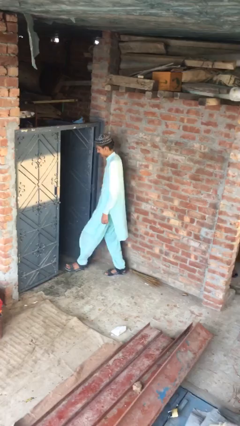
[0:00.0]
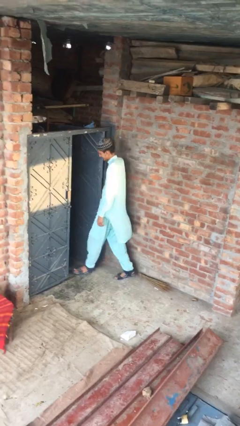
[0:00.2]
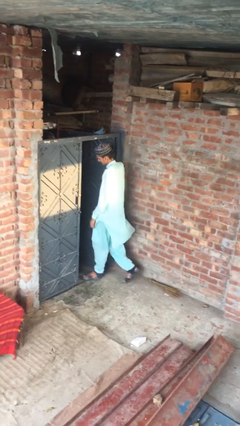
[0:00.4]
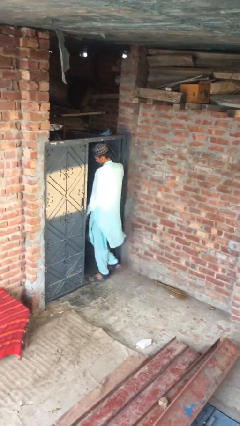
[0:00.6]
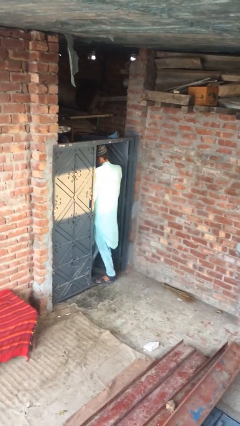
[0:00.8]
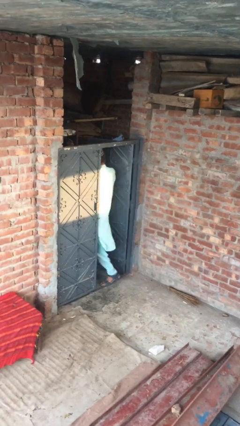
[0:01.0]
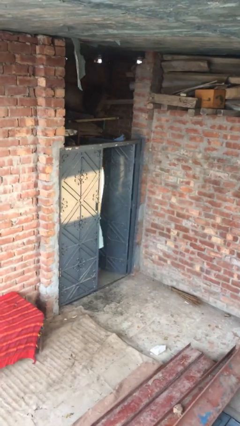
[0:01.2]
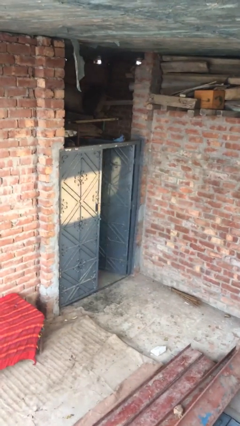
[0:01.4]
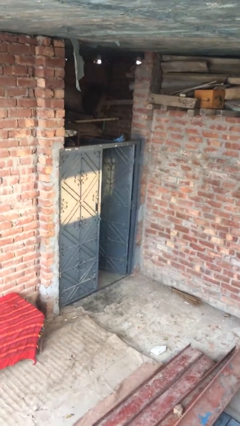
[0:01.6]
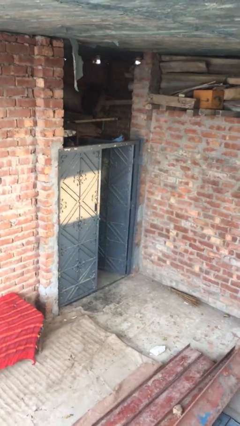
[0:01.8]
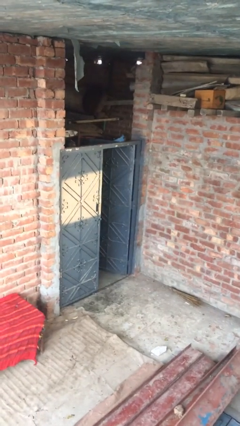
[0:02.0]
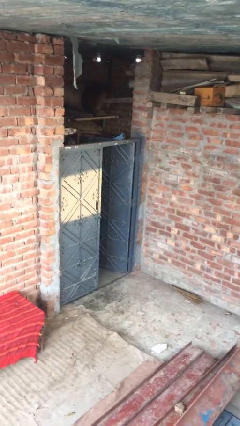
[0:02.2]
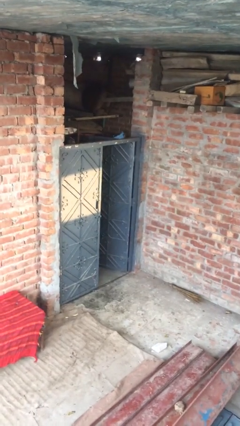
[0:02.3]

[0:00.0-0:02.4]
person exits scene through structure

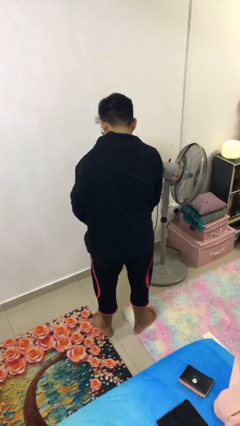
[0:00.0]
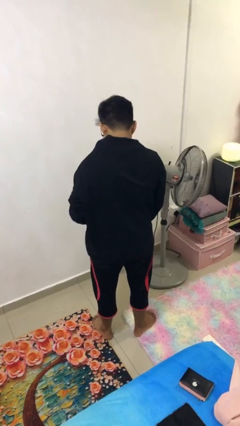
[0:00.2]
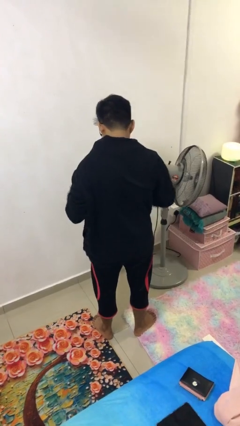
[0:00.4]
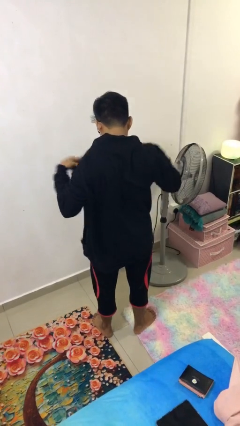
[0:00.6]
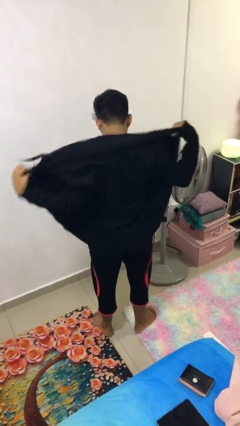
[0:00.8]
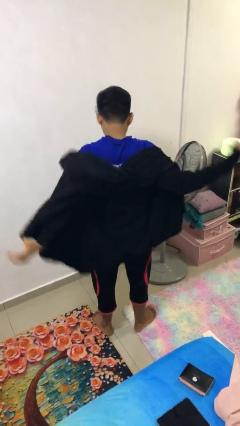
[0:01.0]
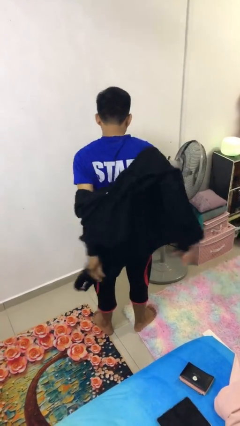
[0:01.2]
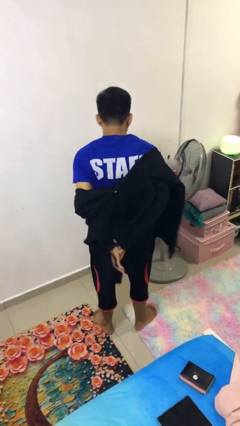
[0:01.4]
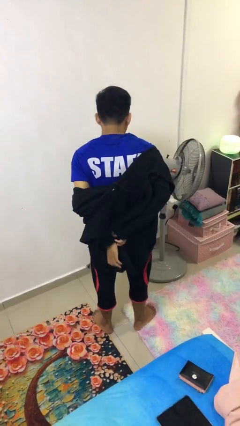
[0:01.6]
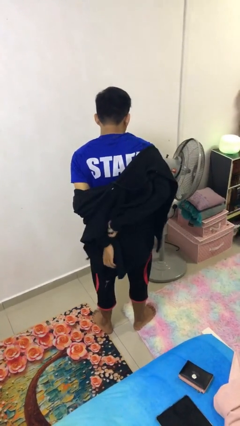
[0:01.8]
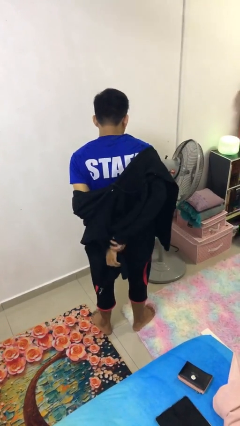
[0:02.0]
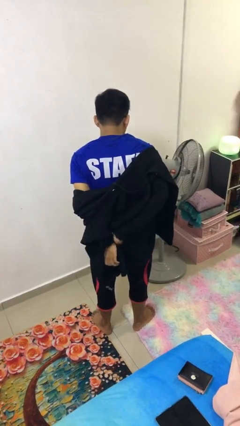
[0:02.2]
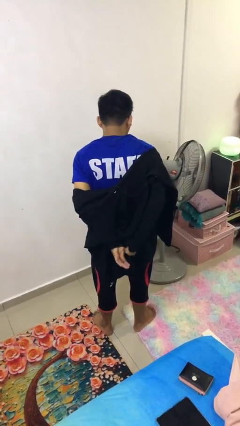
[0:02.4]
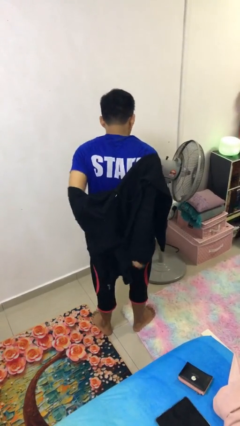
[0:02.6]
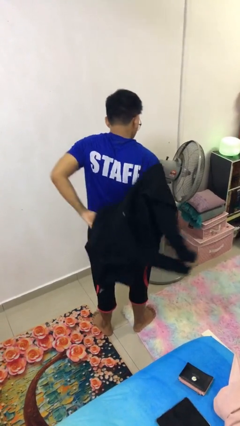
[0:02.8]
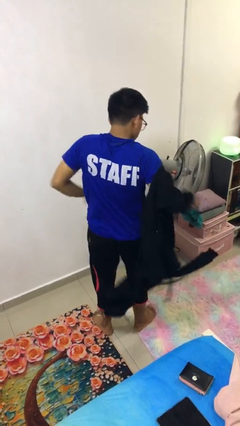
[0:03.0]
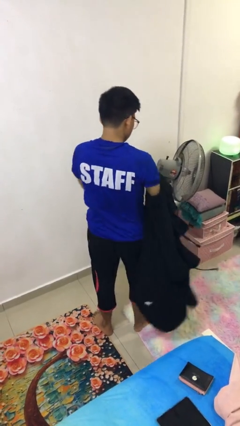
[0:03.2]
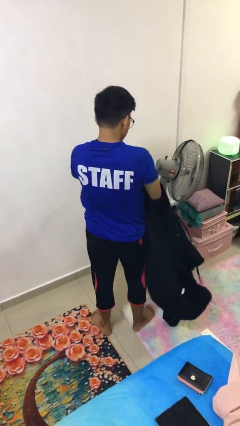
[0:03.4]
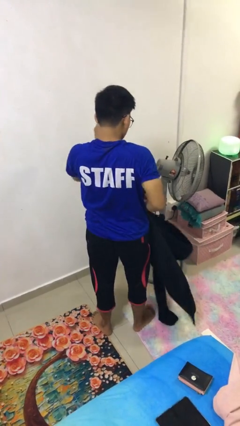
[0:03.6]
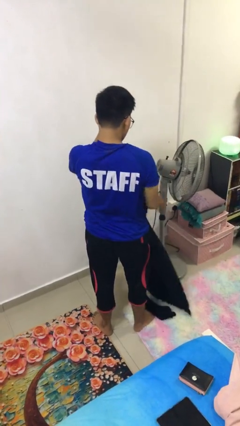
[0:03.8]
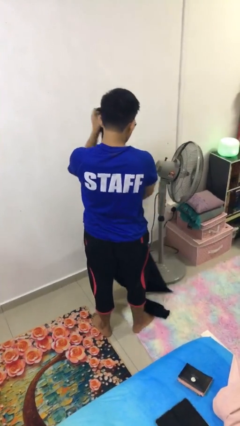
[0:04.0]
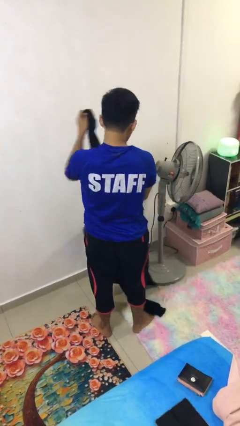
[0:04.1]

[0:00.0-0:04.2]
person takes off jacket

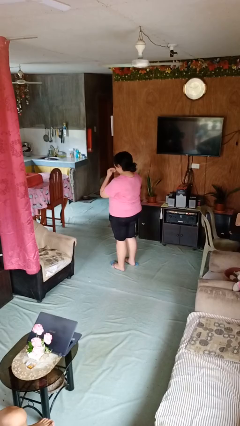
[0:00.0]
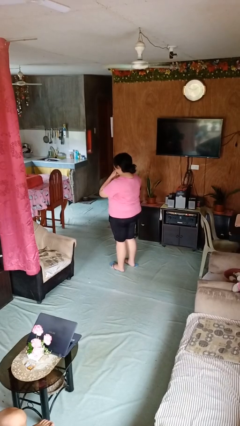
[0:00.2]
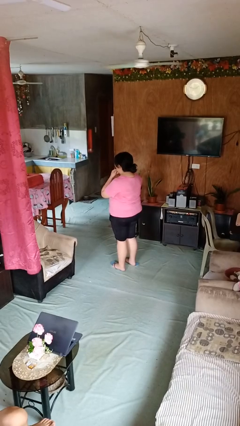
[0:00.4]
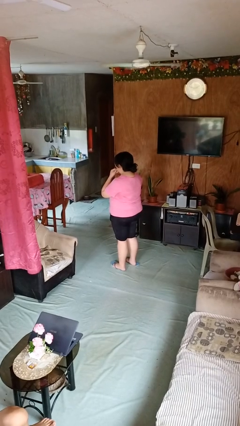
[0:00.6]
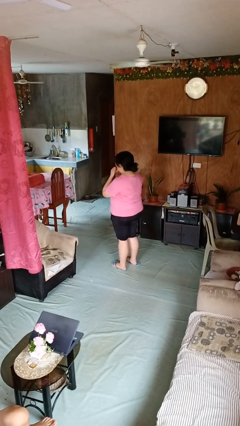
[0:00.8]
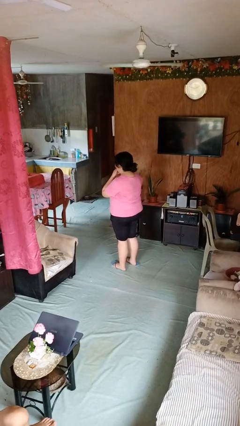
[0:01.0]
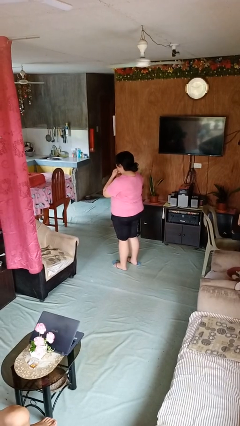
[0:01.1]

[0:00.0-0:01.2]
person strokes chin

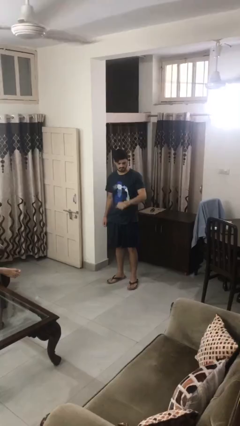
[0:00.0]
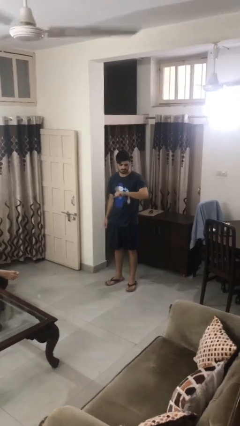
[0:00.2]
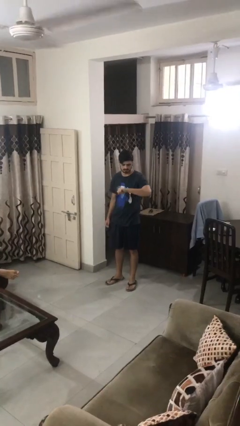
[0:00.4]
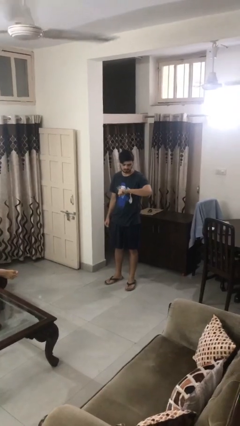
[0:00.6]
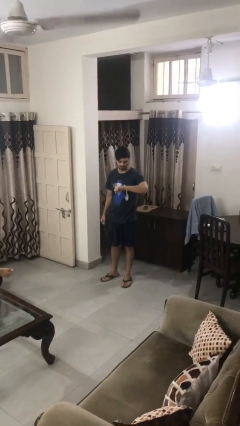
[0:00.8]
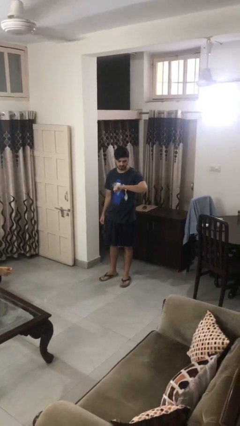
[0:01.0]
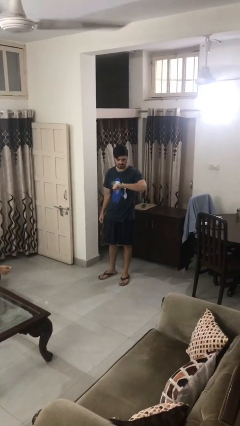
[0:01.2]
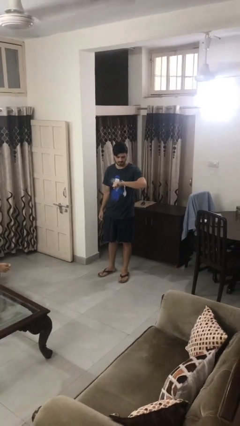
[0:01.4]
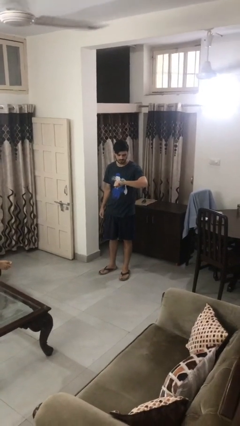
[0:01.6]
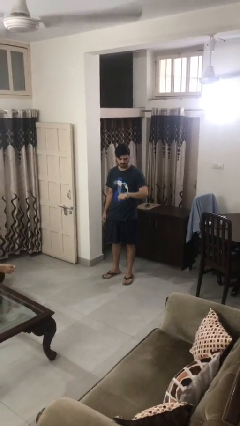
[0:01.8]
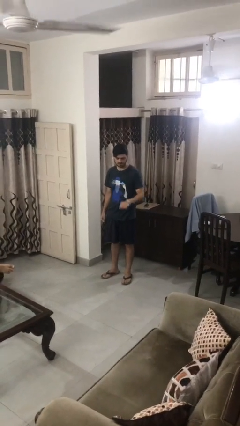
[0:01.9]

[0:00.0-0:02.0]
person looks at wristwatch

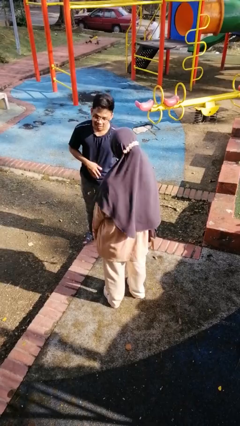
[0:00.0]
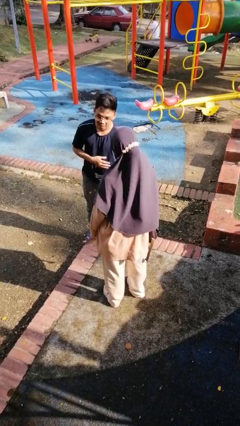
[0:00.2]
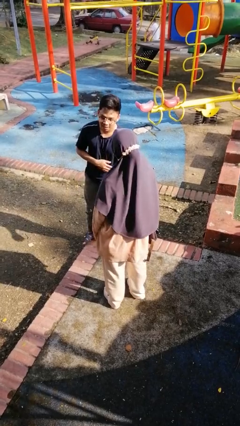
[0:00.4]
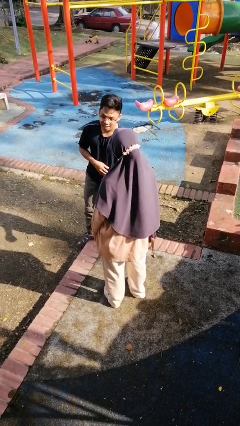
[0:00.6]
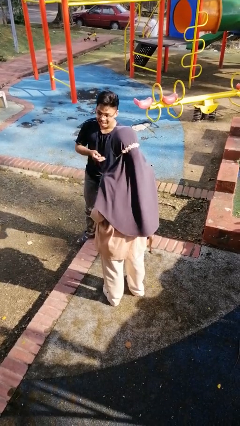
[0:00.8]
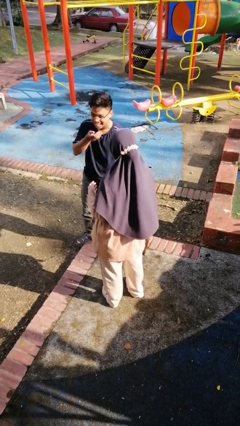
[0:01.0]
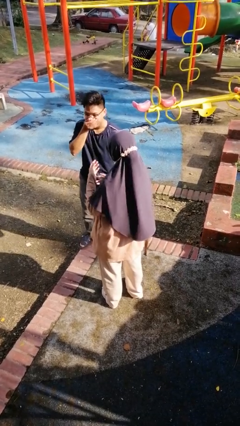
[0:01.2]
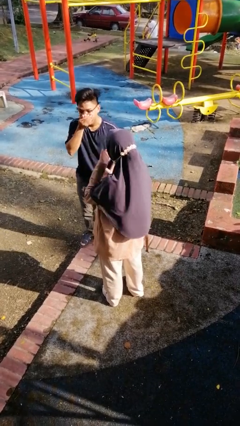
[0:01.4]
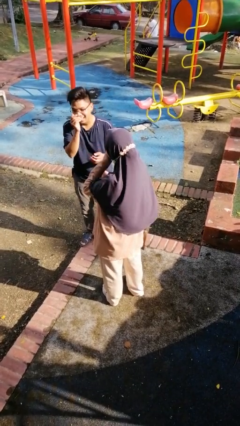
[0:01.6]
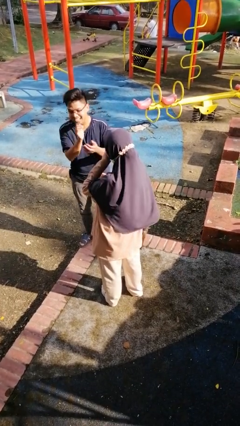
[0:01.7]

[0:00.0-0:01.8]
person laughs with person

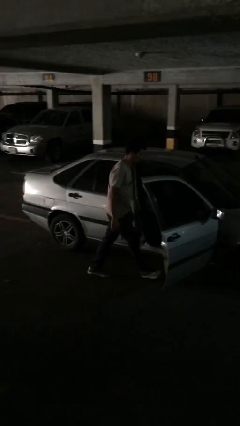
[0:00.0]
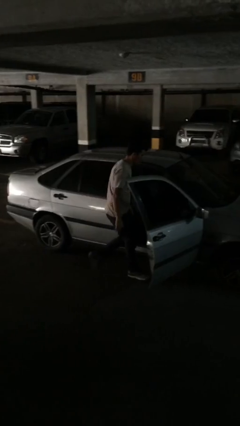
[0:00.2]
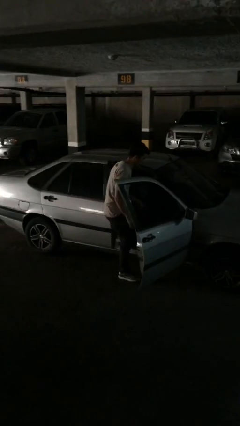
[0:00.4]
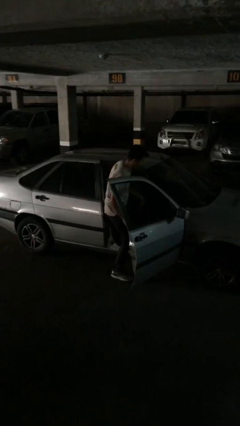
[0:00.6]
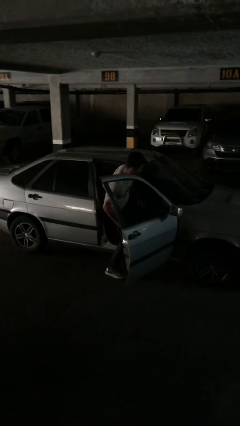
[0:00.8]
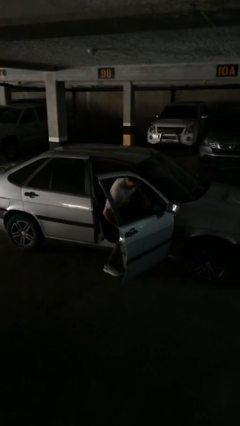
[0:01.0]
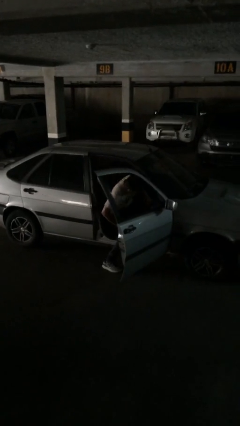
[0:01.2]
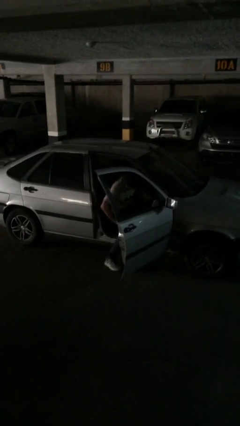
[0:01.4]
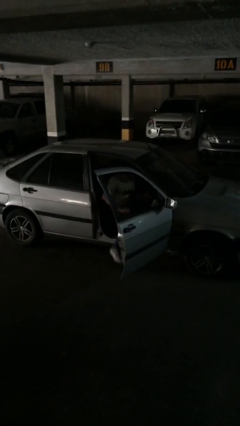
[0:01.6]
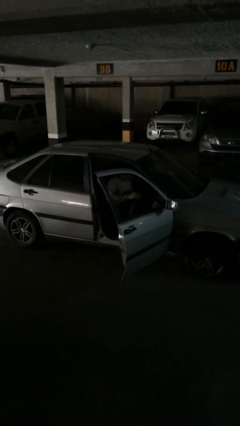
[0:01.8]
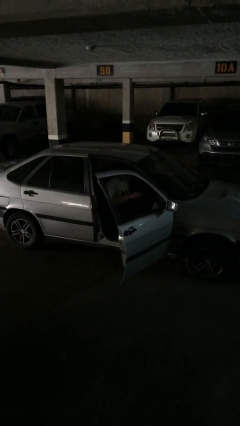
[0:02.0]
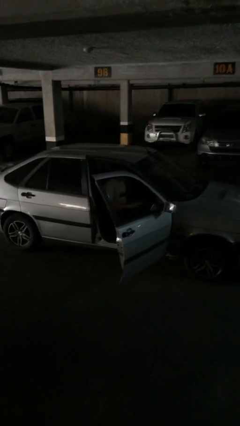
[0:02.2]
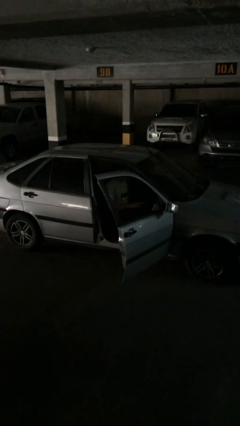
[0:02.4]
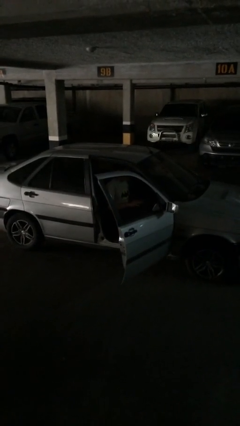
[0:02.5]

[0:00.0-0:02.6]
person enters car

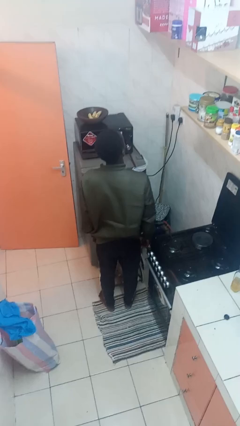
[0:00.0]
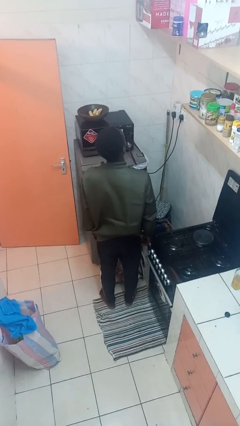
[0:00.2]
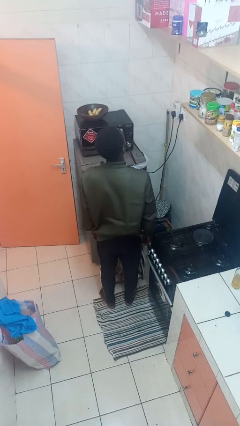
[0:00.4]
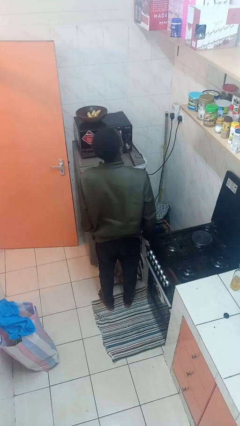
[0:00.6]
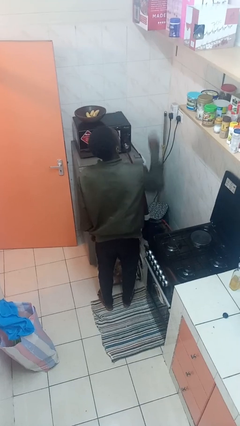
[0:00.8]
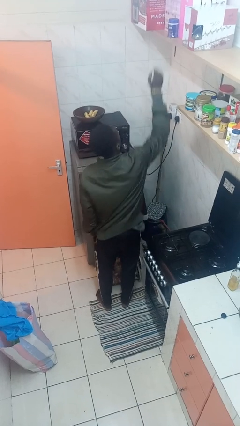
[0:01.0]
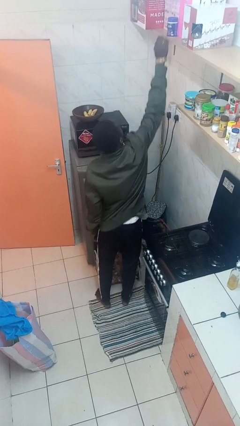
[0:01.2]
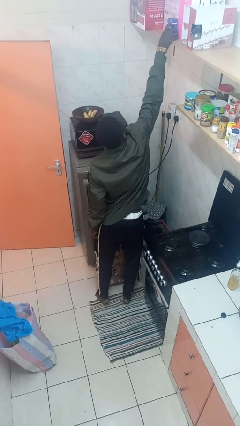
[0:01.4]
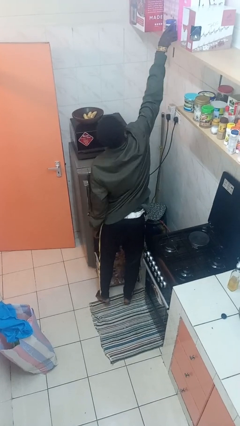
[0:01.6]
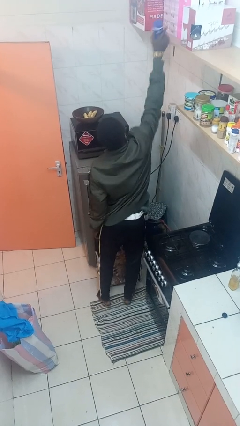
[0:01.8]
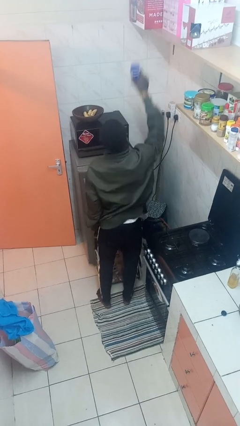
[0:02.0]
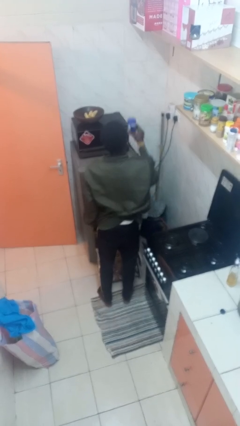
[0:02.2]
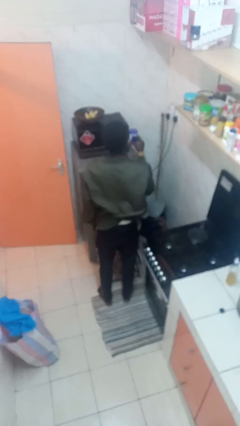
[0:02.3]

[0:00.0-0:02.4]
person picks up object from shelf

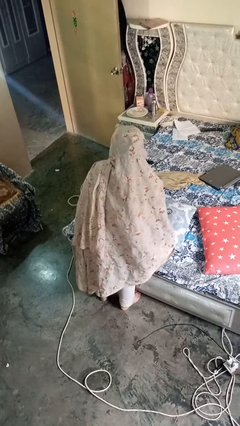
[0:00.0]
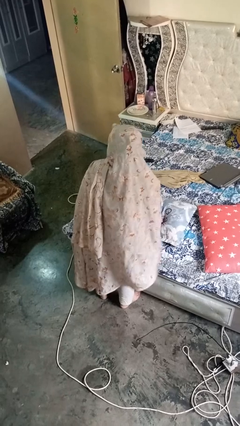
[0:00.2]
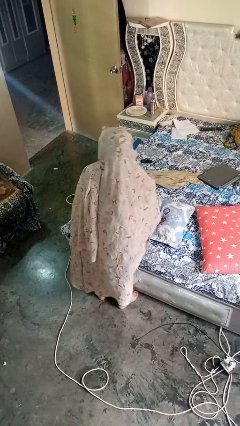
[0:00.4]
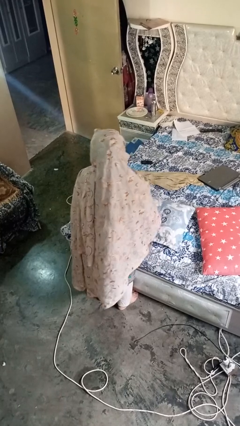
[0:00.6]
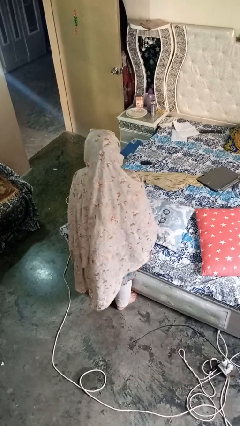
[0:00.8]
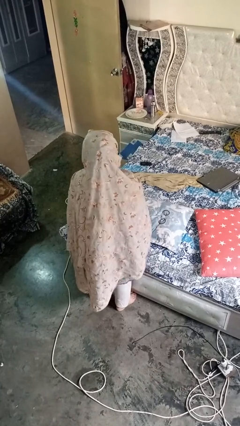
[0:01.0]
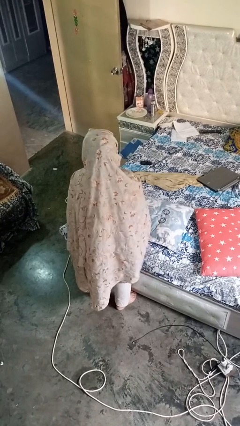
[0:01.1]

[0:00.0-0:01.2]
person taps object with finger
